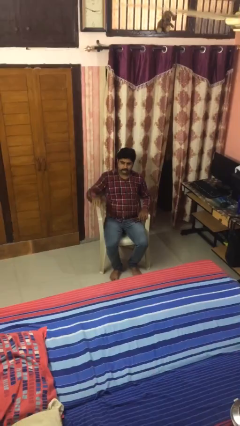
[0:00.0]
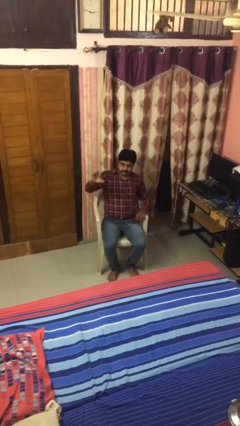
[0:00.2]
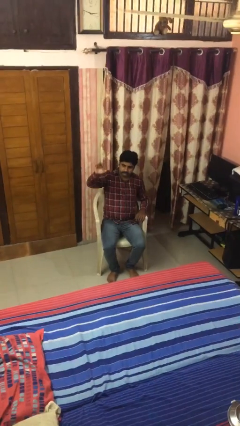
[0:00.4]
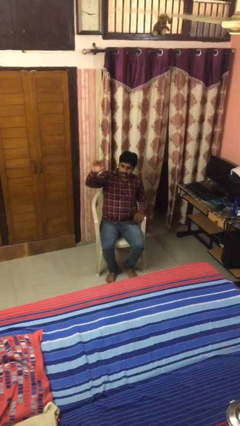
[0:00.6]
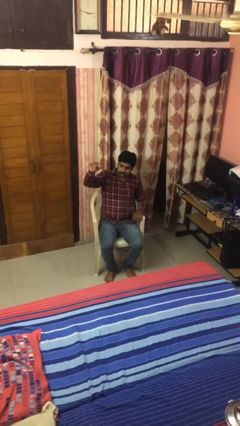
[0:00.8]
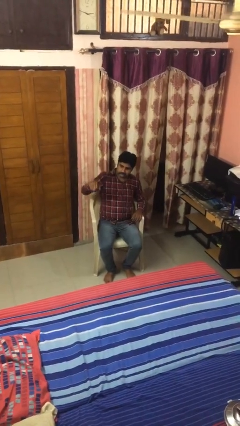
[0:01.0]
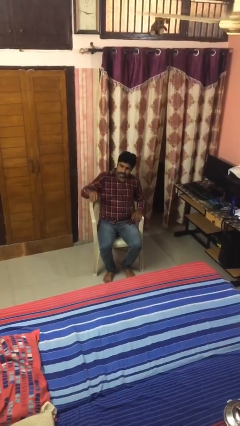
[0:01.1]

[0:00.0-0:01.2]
person gestures come here

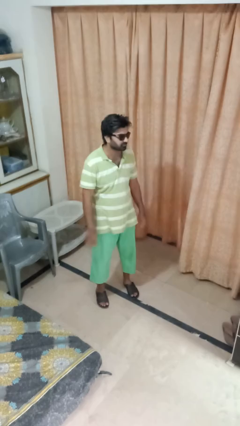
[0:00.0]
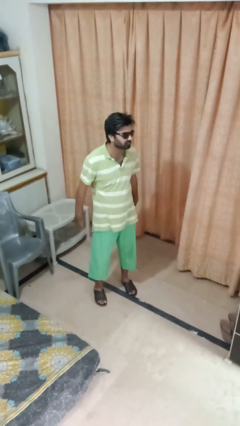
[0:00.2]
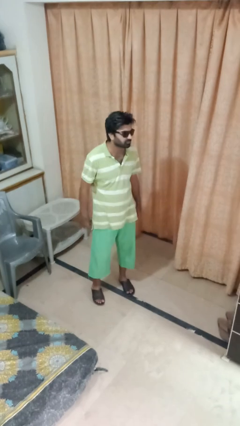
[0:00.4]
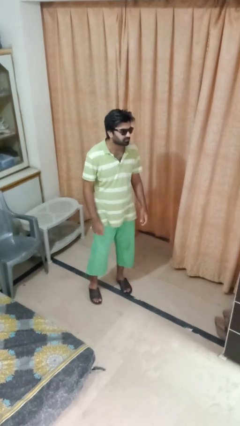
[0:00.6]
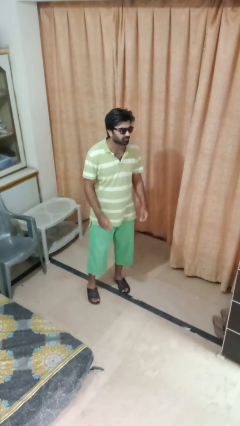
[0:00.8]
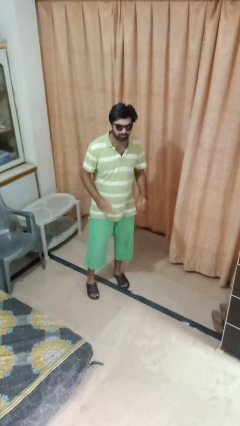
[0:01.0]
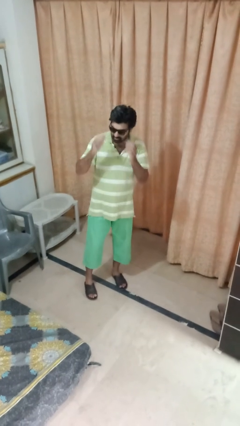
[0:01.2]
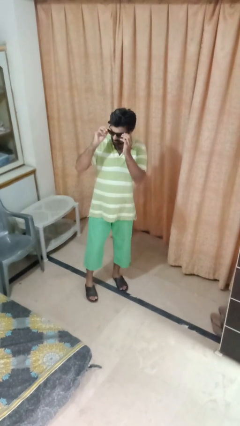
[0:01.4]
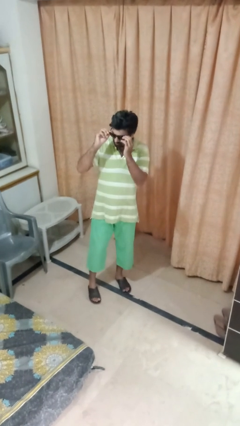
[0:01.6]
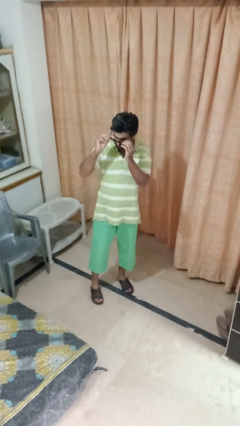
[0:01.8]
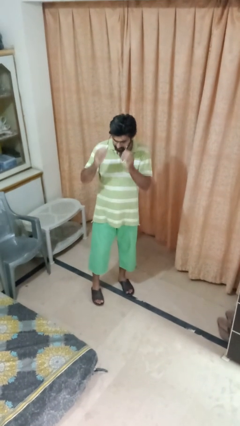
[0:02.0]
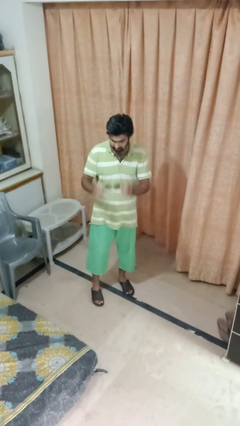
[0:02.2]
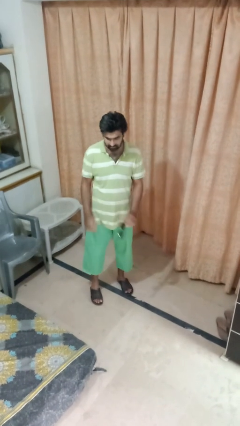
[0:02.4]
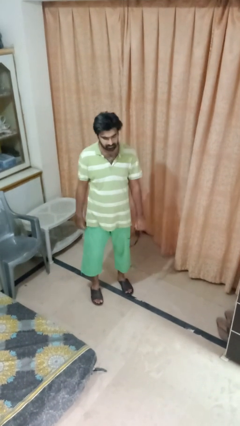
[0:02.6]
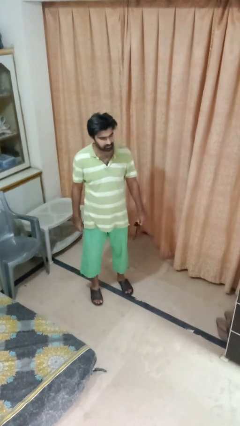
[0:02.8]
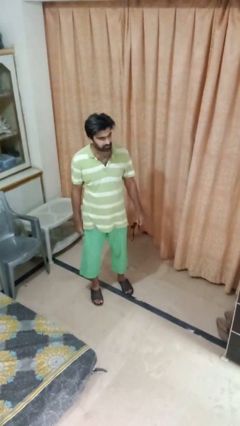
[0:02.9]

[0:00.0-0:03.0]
person takes off sunglasses

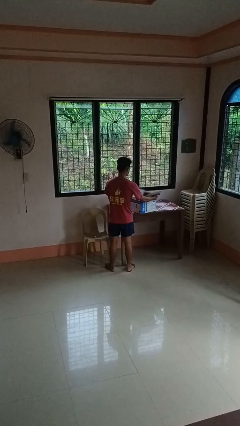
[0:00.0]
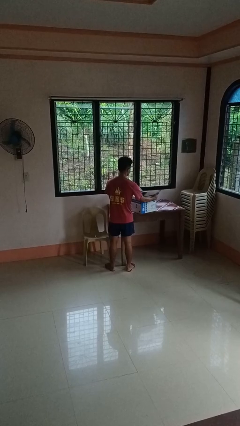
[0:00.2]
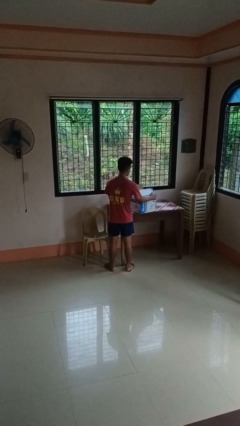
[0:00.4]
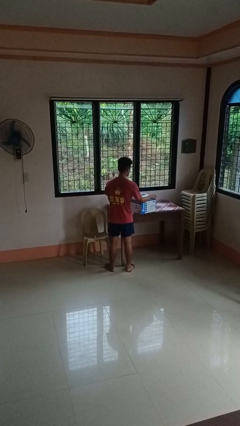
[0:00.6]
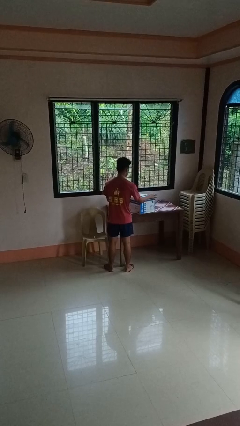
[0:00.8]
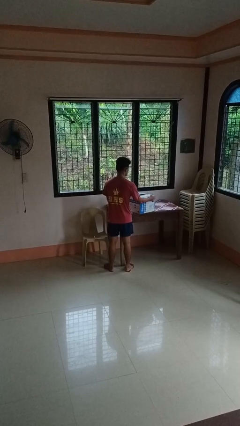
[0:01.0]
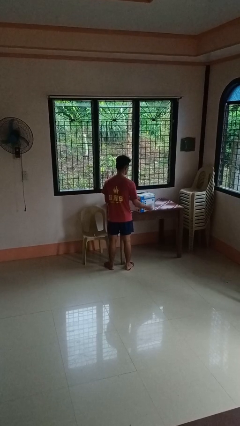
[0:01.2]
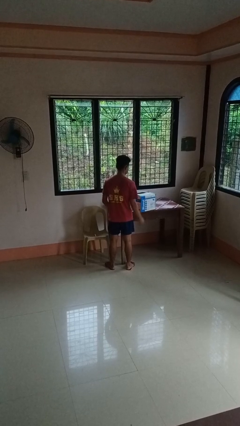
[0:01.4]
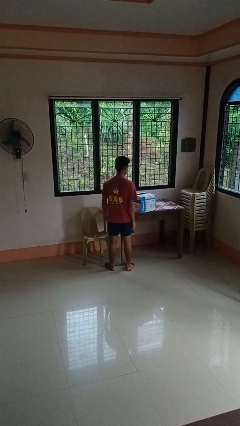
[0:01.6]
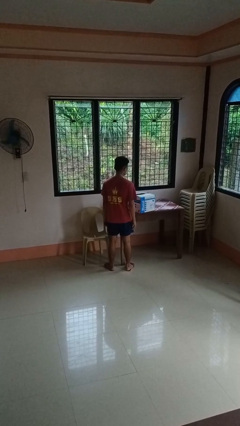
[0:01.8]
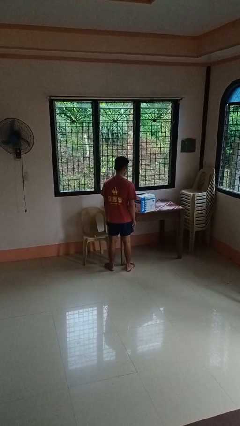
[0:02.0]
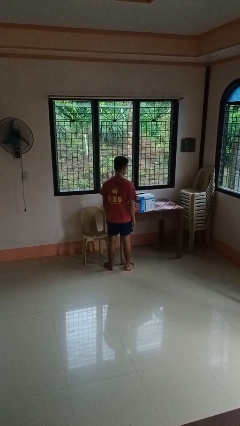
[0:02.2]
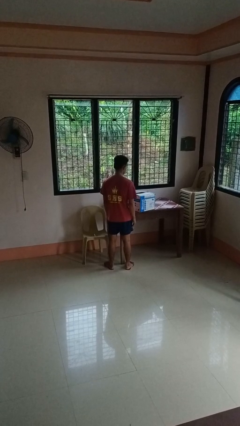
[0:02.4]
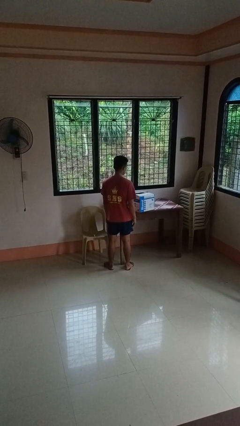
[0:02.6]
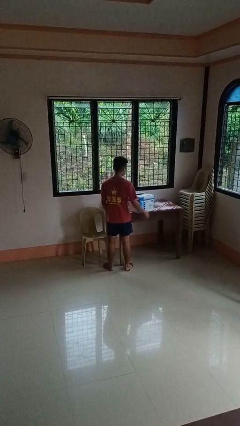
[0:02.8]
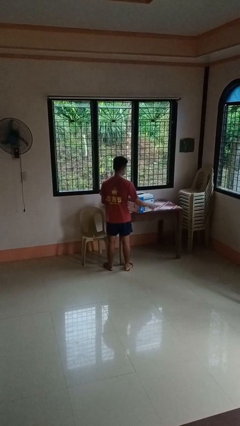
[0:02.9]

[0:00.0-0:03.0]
person closes box

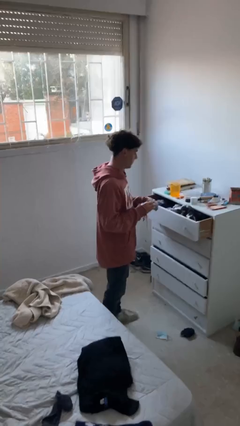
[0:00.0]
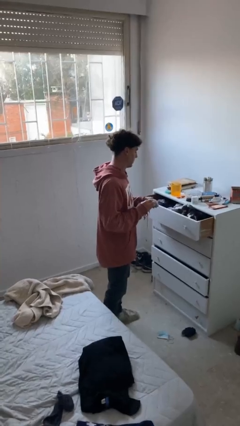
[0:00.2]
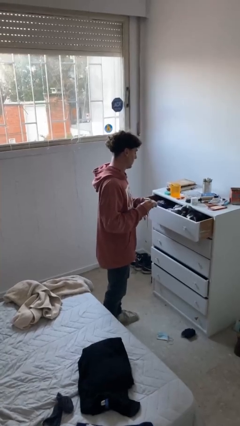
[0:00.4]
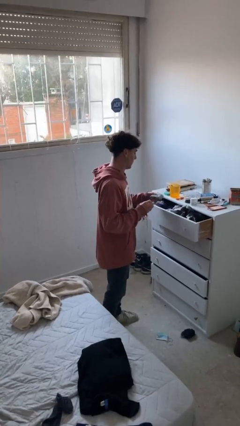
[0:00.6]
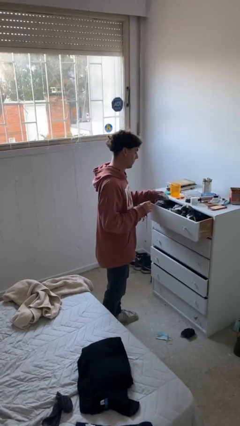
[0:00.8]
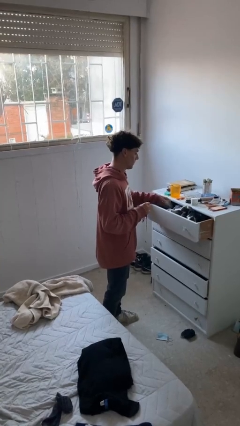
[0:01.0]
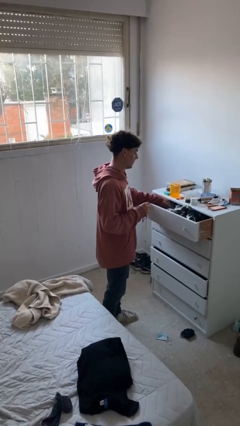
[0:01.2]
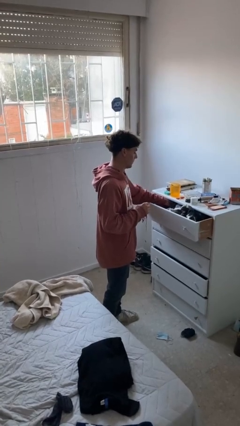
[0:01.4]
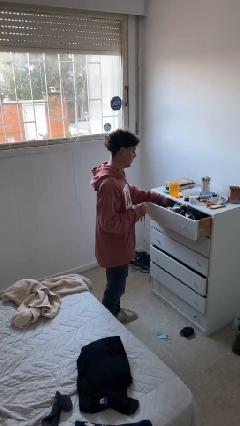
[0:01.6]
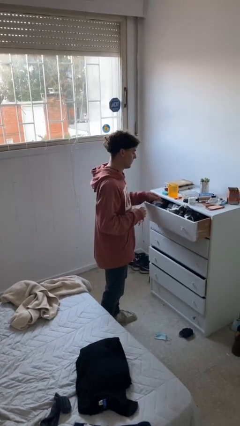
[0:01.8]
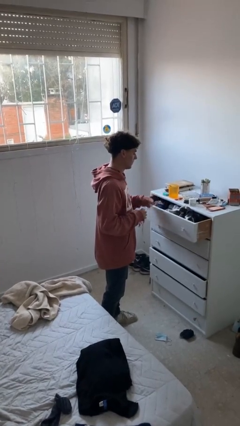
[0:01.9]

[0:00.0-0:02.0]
person puts clothes into dresser

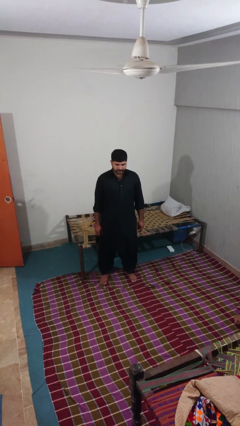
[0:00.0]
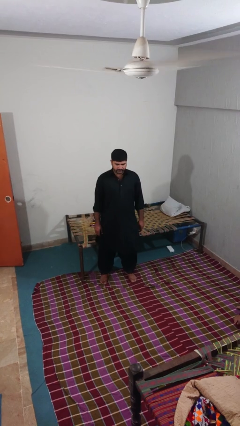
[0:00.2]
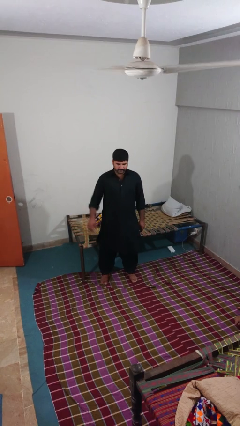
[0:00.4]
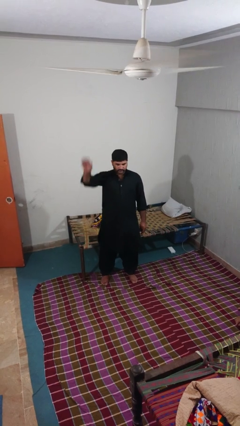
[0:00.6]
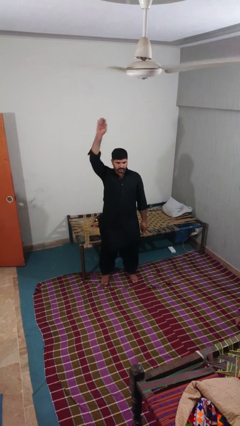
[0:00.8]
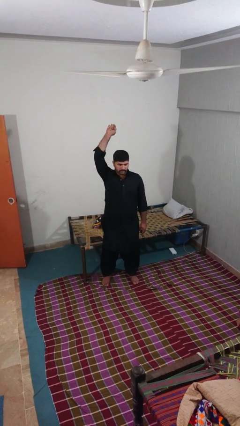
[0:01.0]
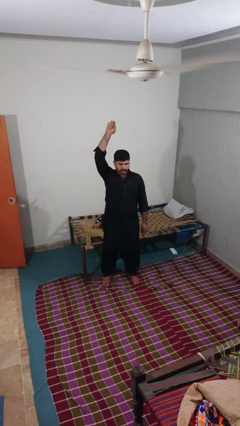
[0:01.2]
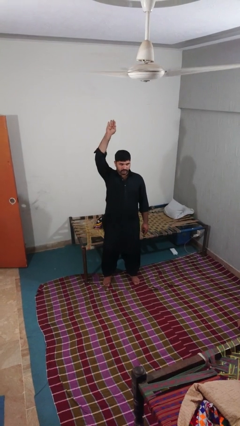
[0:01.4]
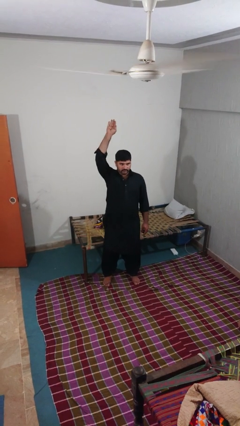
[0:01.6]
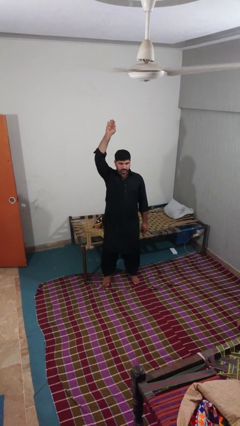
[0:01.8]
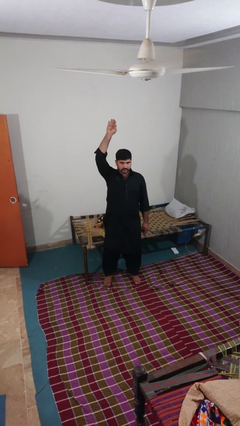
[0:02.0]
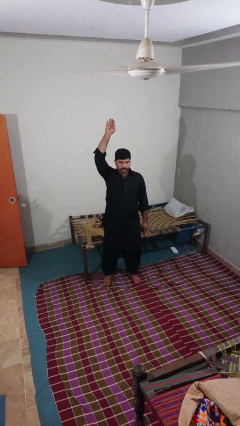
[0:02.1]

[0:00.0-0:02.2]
person gestures raise hand

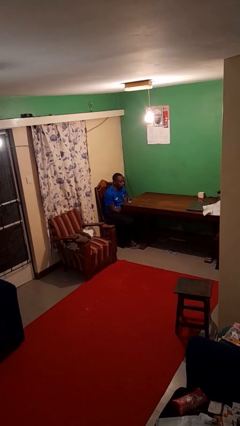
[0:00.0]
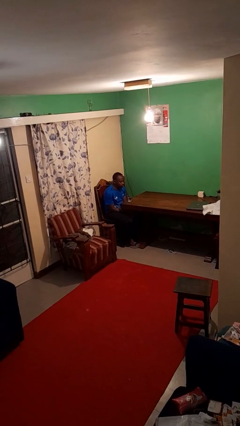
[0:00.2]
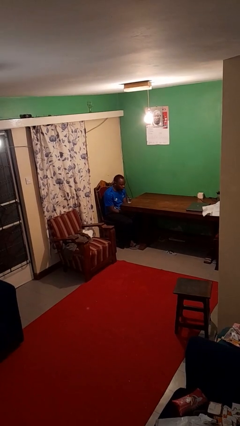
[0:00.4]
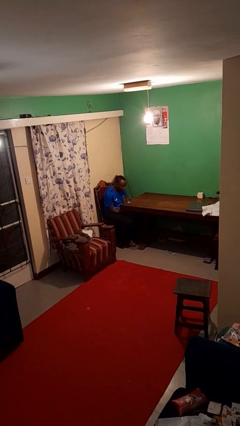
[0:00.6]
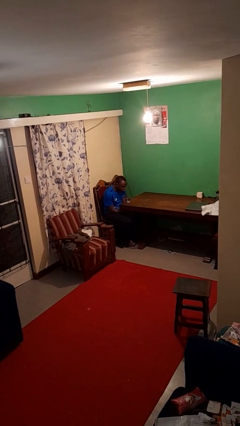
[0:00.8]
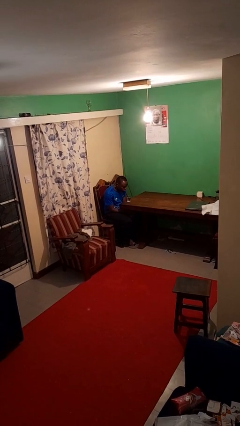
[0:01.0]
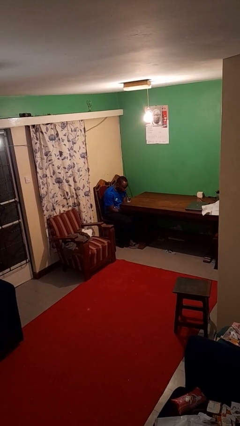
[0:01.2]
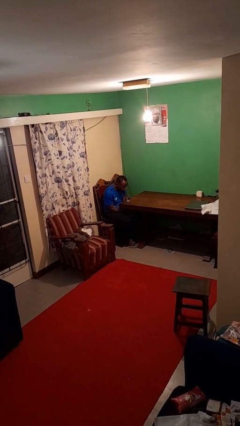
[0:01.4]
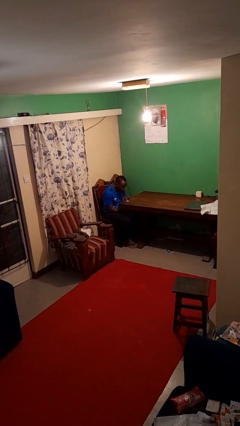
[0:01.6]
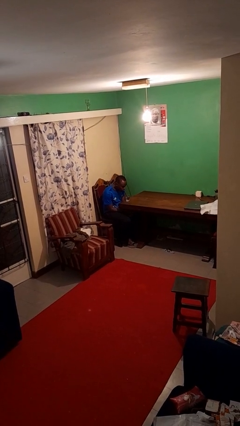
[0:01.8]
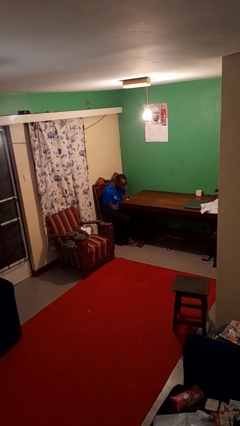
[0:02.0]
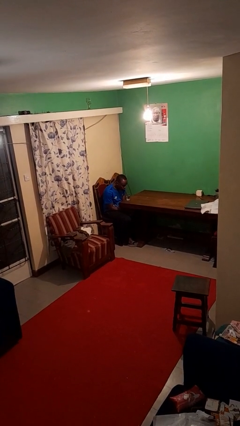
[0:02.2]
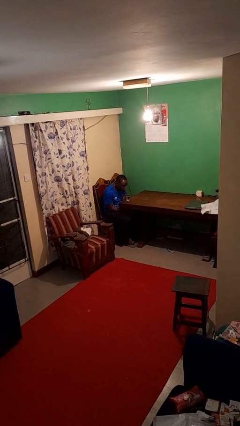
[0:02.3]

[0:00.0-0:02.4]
person drinks from straw

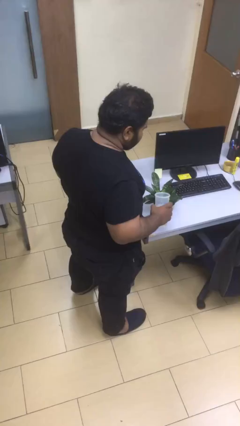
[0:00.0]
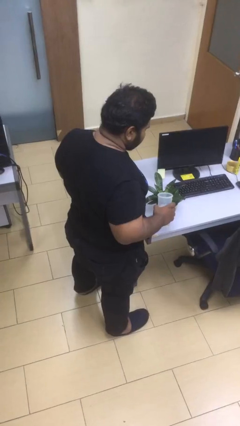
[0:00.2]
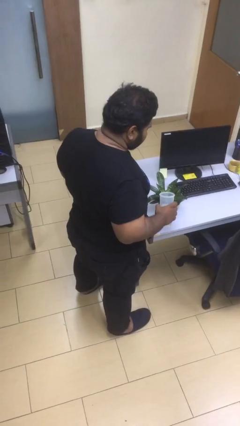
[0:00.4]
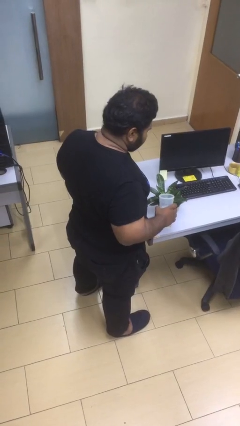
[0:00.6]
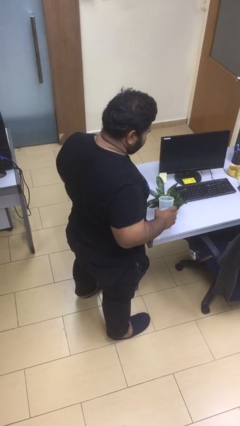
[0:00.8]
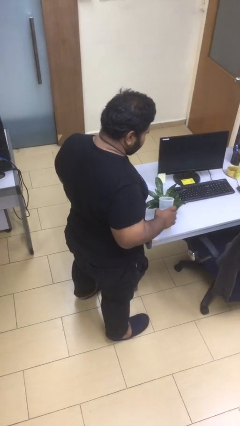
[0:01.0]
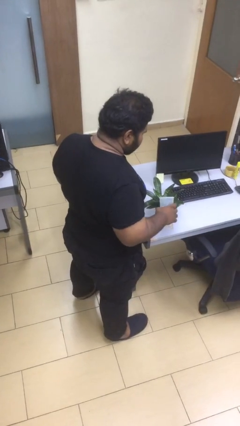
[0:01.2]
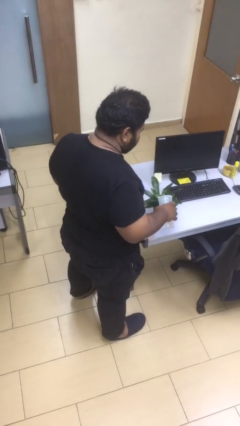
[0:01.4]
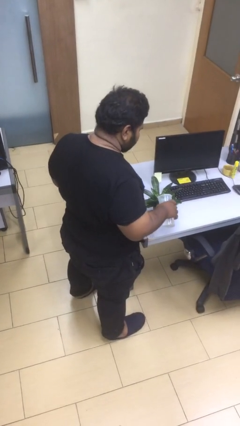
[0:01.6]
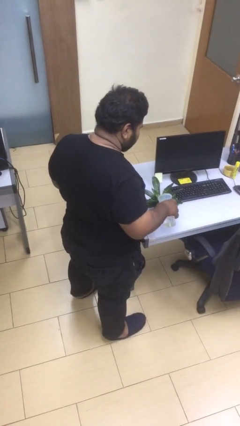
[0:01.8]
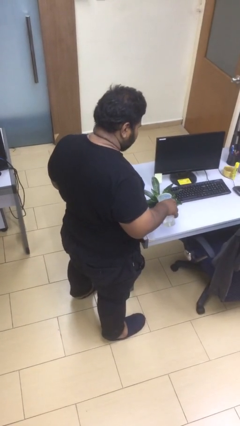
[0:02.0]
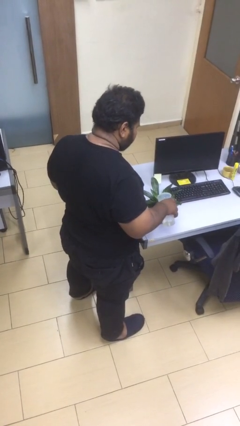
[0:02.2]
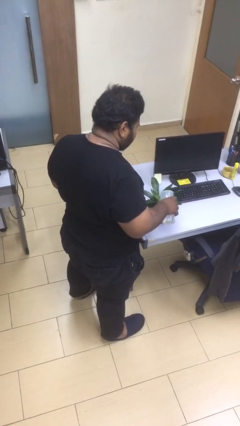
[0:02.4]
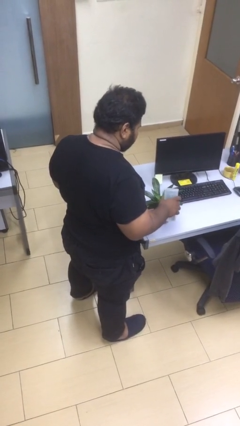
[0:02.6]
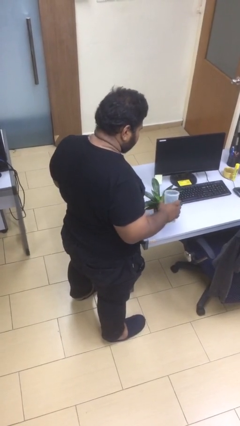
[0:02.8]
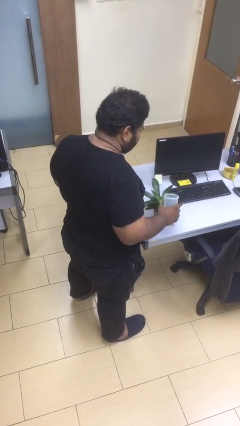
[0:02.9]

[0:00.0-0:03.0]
person waters houseplant

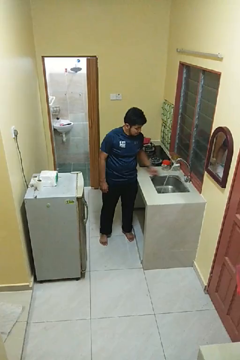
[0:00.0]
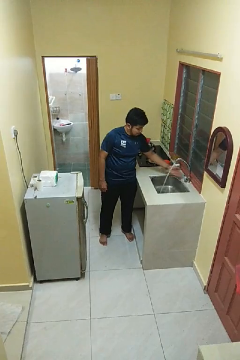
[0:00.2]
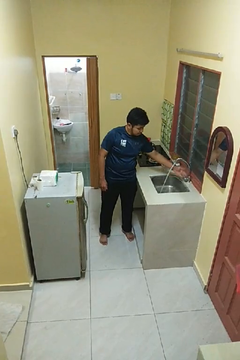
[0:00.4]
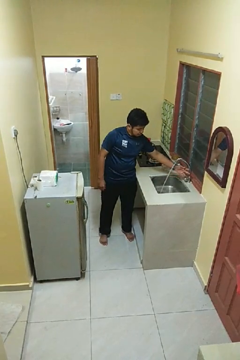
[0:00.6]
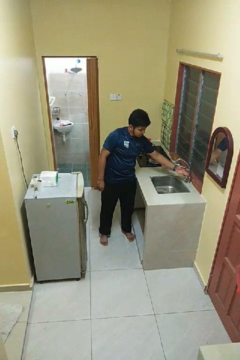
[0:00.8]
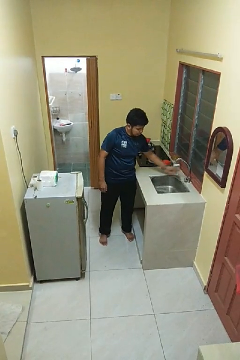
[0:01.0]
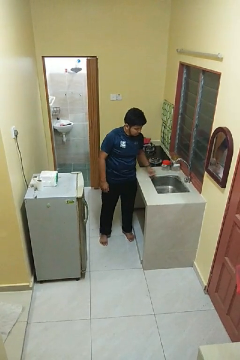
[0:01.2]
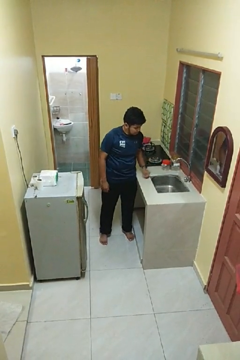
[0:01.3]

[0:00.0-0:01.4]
person turns off faucet
